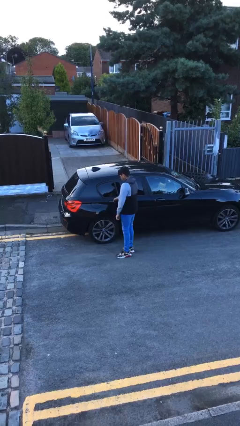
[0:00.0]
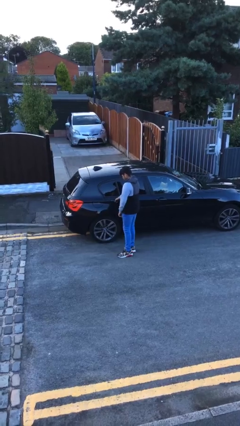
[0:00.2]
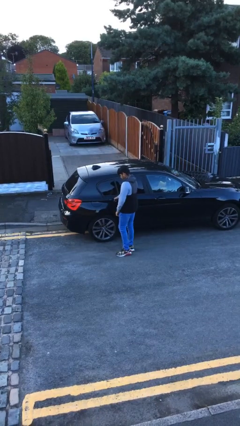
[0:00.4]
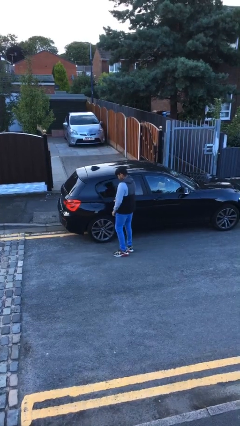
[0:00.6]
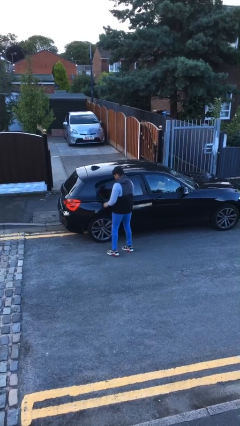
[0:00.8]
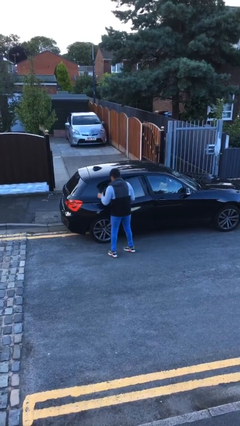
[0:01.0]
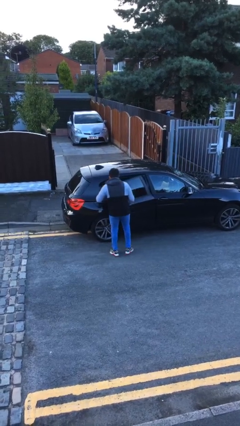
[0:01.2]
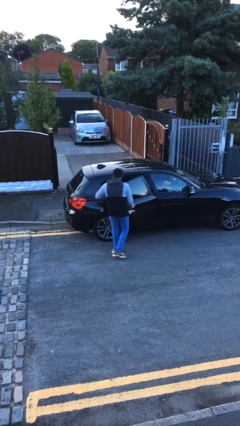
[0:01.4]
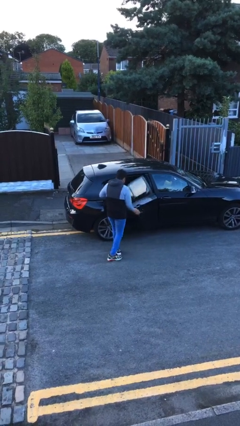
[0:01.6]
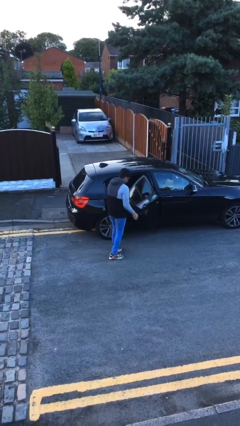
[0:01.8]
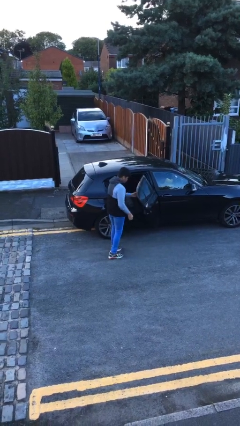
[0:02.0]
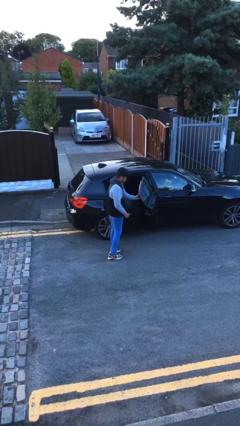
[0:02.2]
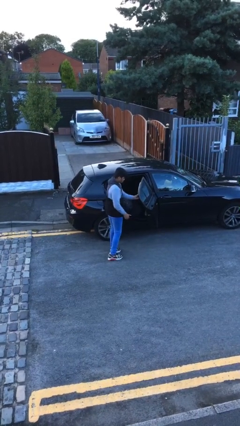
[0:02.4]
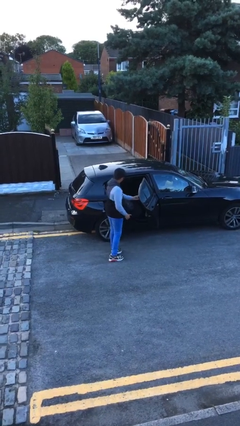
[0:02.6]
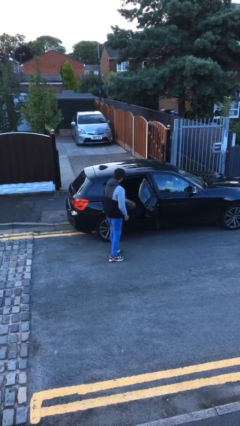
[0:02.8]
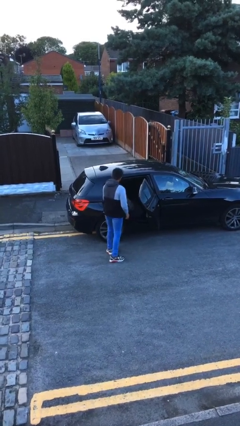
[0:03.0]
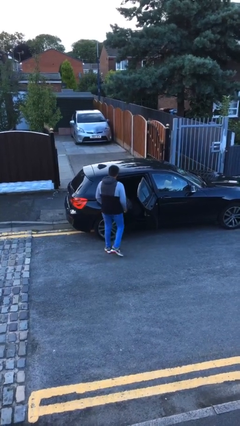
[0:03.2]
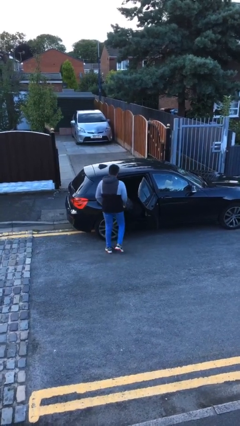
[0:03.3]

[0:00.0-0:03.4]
person opens car door

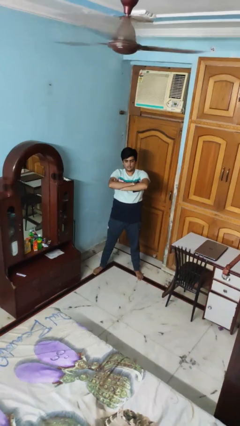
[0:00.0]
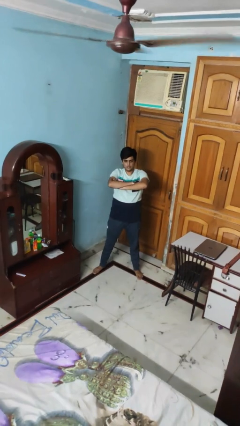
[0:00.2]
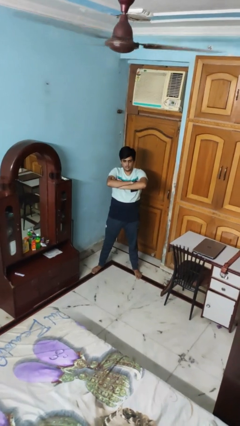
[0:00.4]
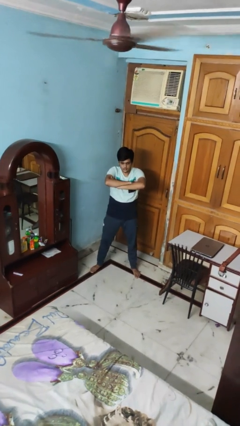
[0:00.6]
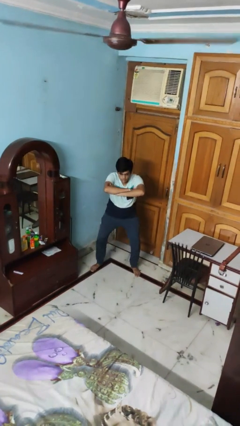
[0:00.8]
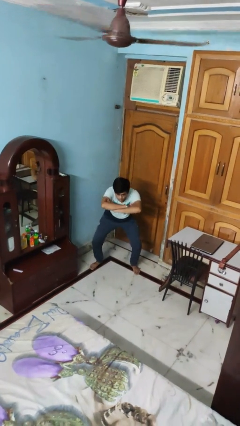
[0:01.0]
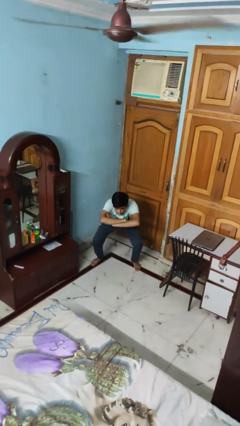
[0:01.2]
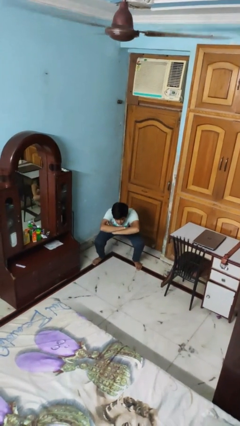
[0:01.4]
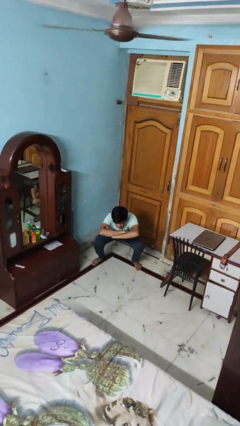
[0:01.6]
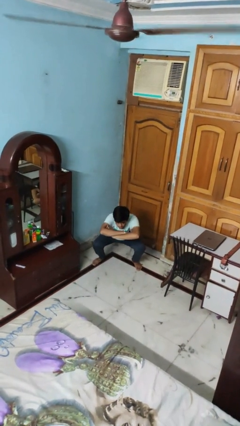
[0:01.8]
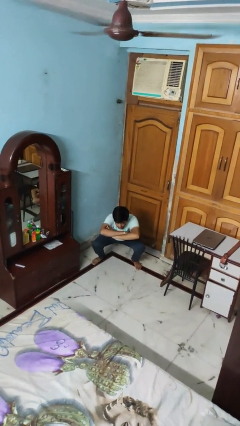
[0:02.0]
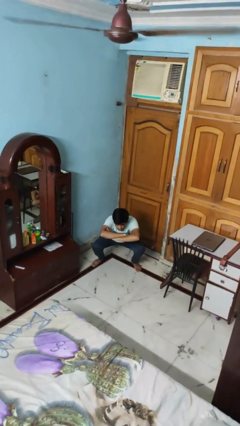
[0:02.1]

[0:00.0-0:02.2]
person squats

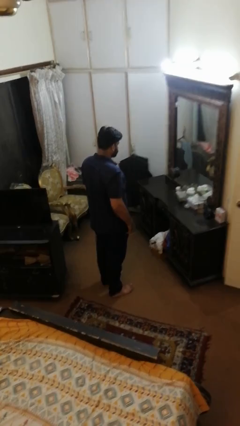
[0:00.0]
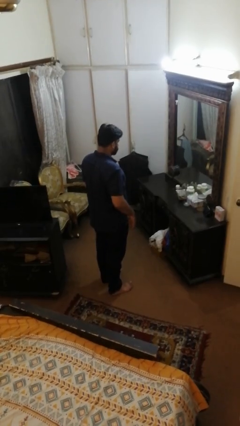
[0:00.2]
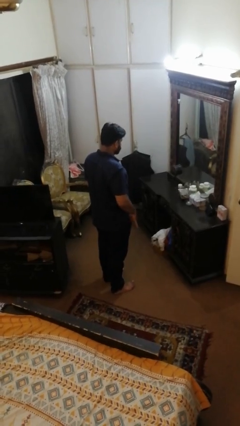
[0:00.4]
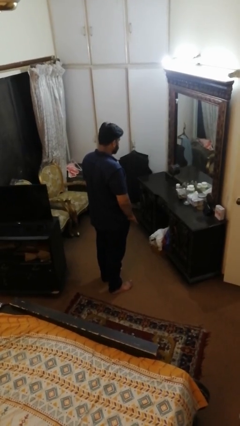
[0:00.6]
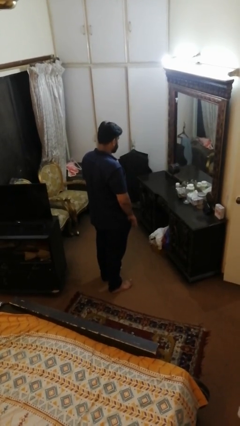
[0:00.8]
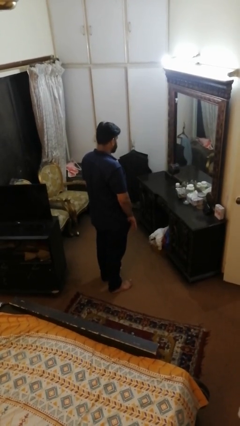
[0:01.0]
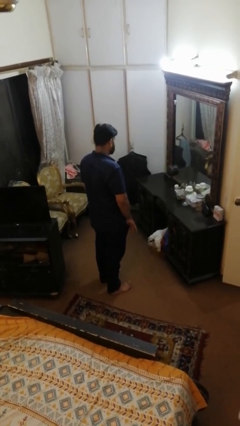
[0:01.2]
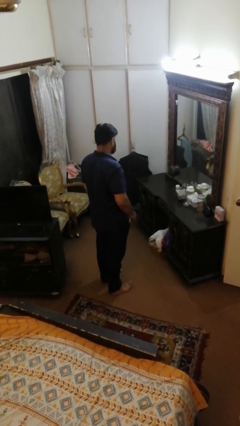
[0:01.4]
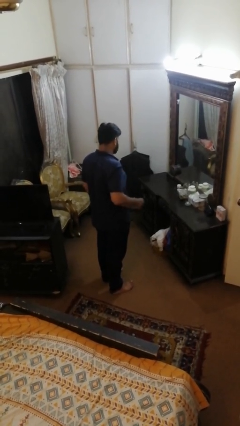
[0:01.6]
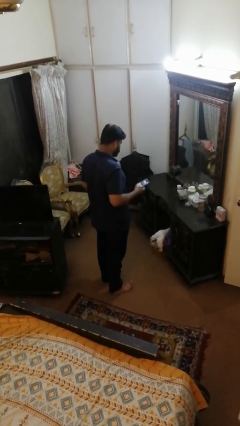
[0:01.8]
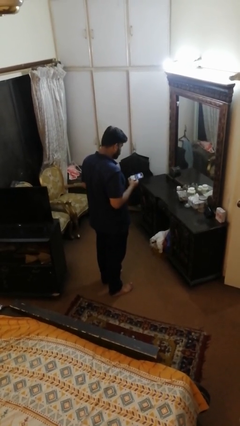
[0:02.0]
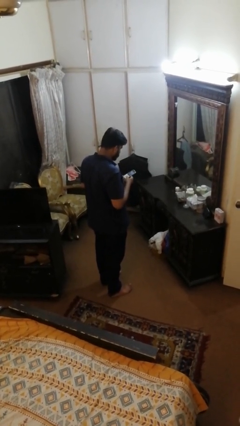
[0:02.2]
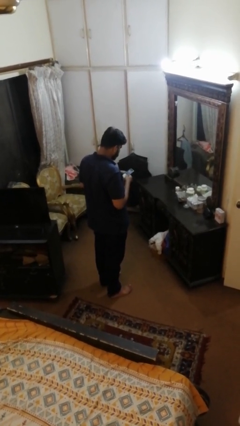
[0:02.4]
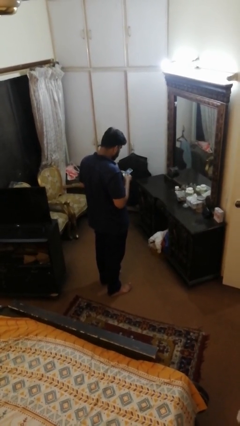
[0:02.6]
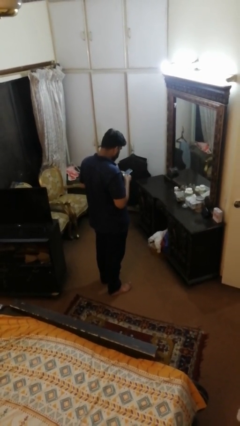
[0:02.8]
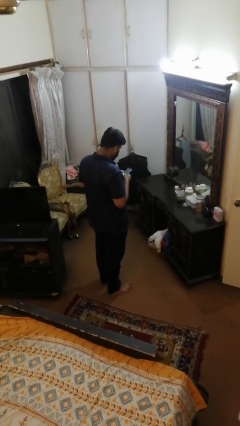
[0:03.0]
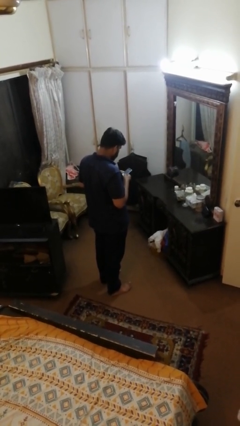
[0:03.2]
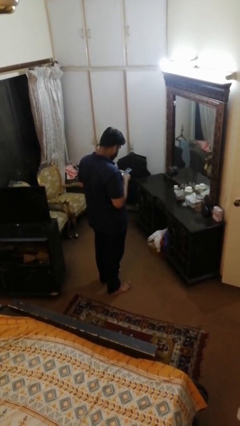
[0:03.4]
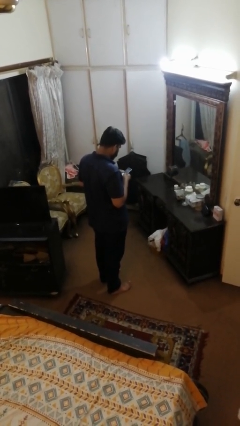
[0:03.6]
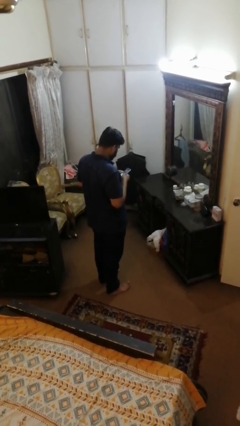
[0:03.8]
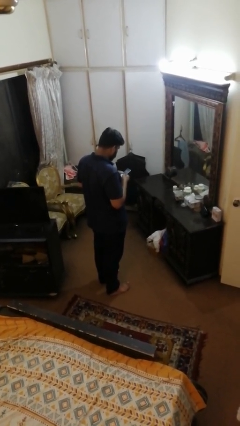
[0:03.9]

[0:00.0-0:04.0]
person takes phone from pocket

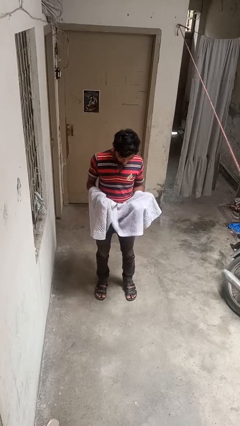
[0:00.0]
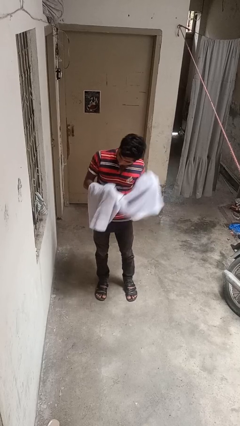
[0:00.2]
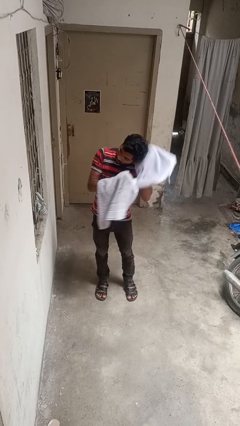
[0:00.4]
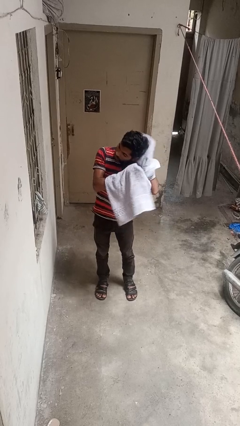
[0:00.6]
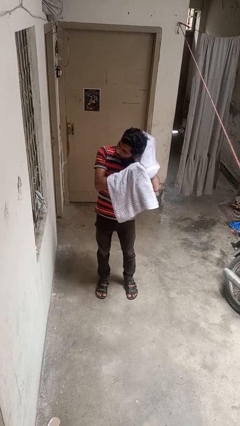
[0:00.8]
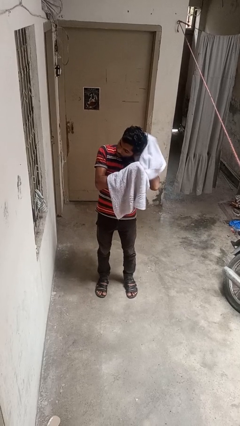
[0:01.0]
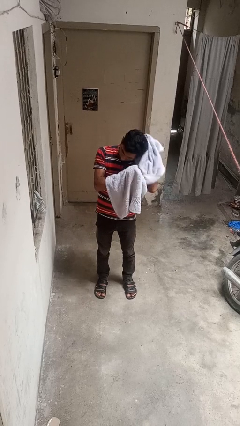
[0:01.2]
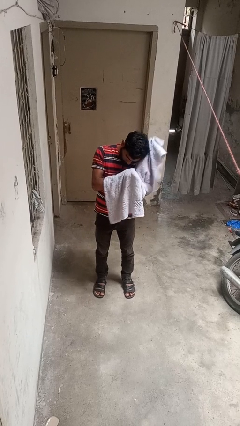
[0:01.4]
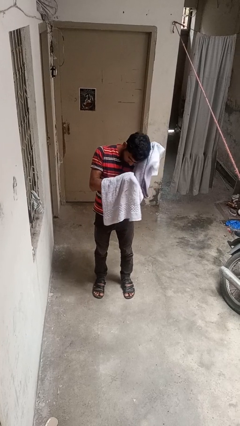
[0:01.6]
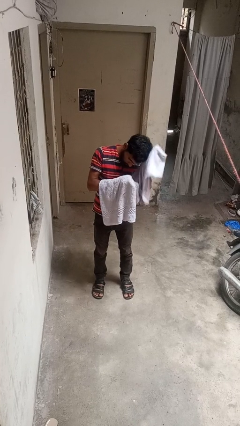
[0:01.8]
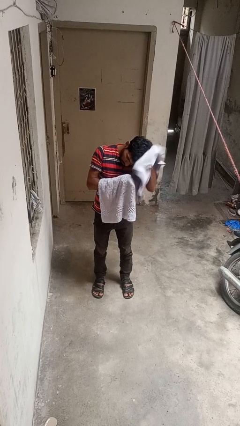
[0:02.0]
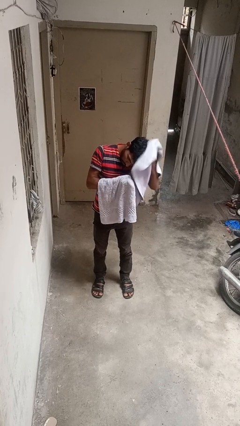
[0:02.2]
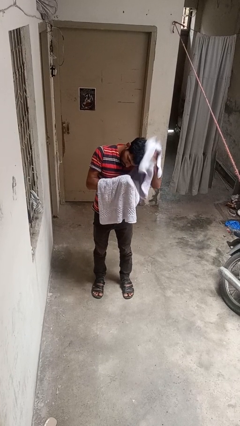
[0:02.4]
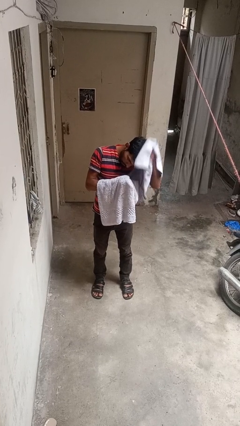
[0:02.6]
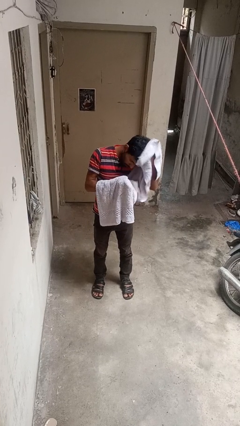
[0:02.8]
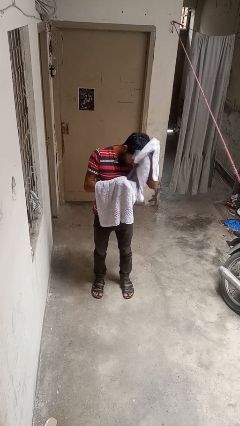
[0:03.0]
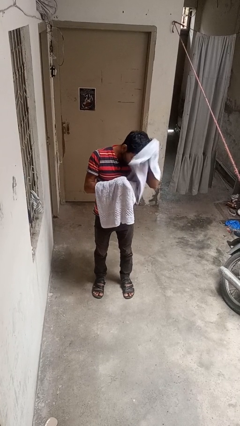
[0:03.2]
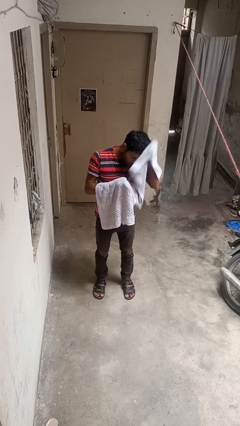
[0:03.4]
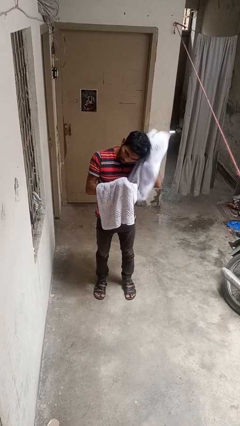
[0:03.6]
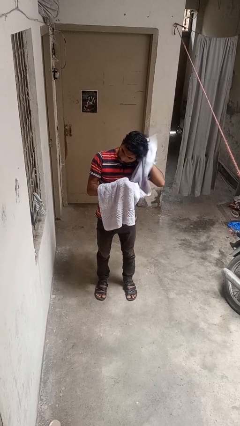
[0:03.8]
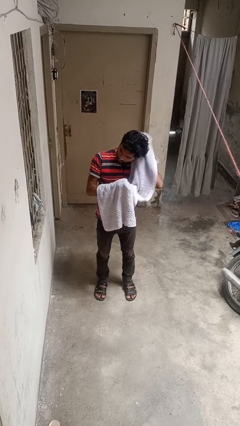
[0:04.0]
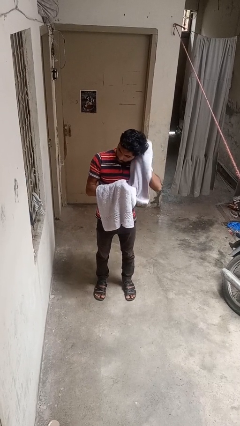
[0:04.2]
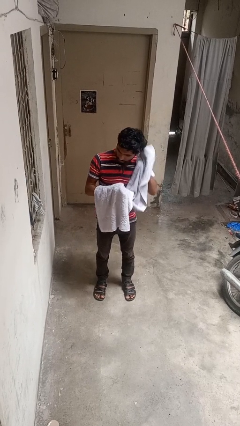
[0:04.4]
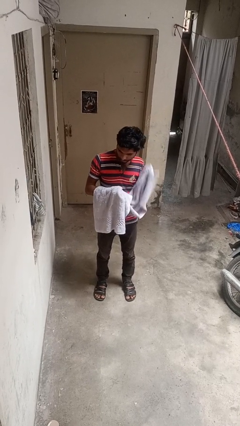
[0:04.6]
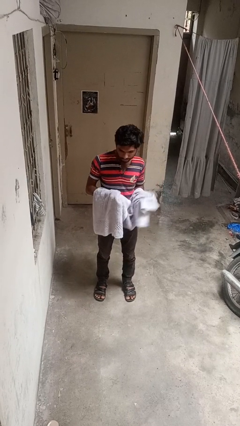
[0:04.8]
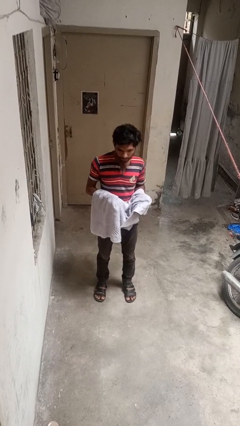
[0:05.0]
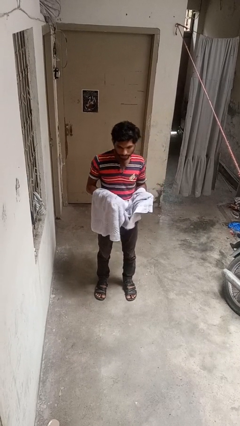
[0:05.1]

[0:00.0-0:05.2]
person dries hair with towel

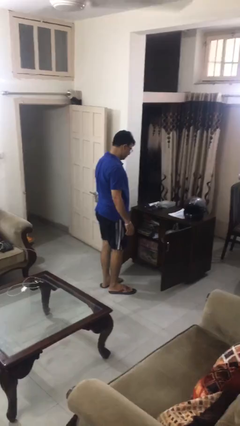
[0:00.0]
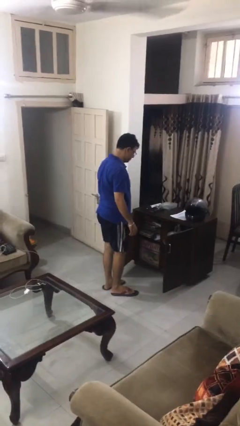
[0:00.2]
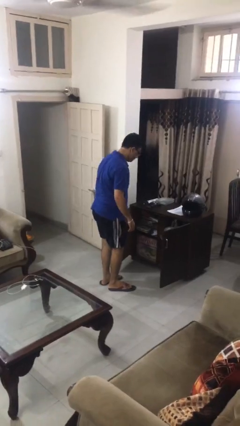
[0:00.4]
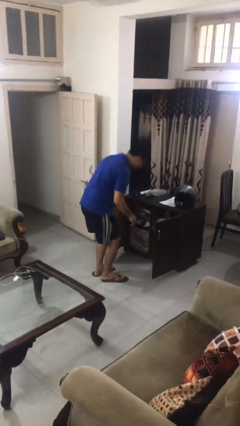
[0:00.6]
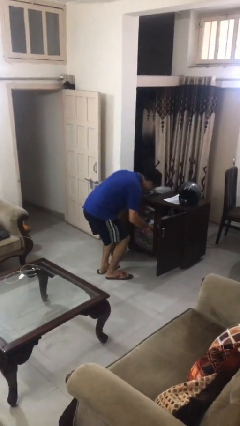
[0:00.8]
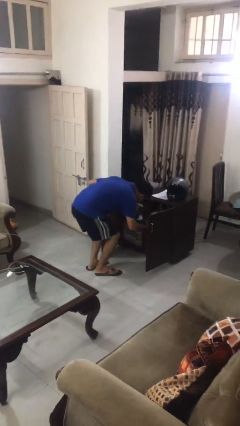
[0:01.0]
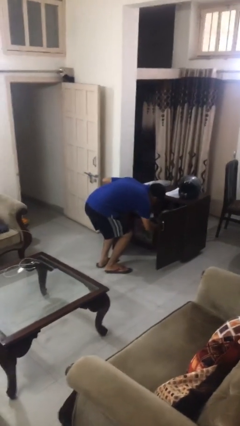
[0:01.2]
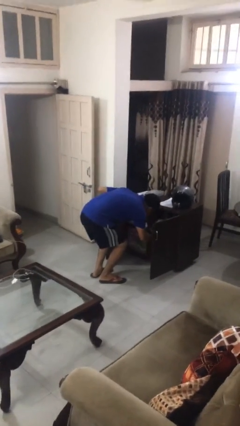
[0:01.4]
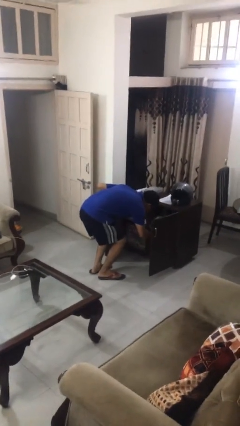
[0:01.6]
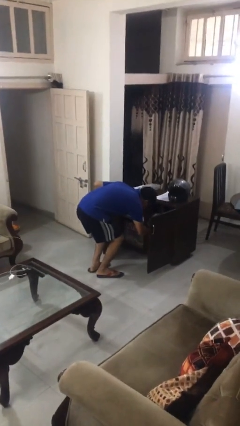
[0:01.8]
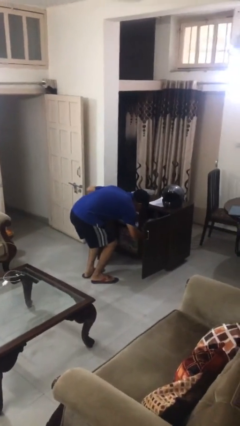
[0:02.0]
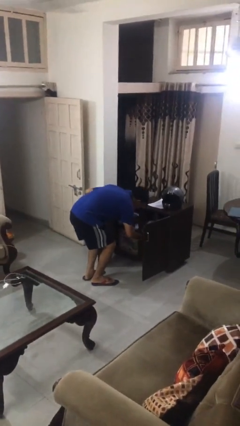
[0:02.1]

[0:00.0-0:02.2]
person searches in cabinet

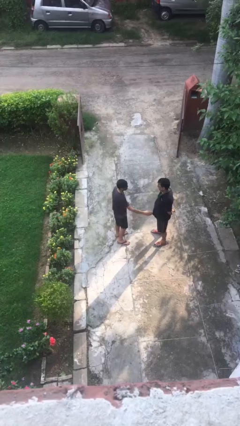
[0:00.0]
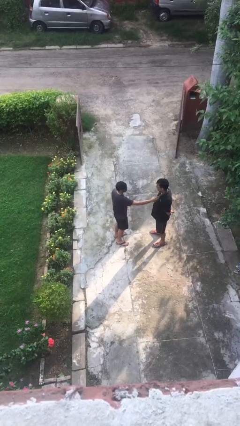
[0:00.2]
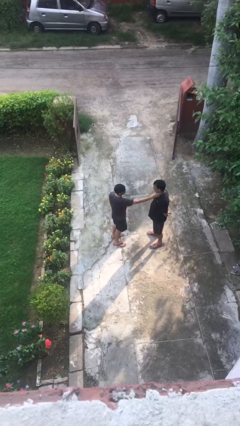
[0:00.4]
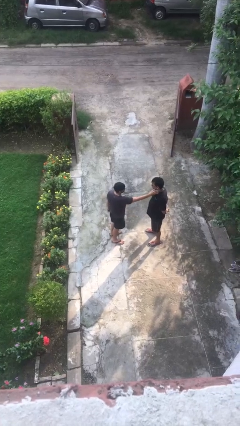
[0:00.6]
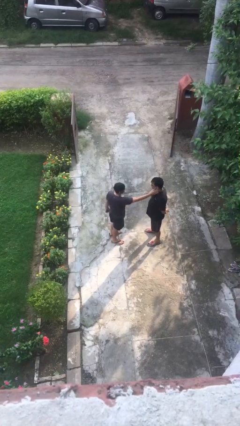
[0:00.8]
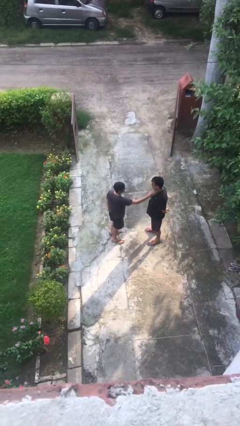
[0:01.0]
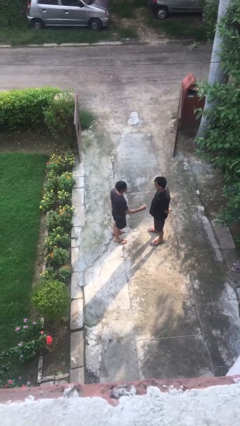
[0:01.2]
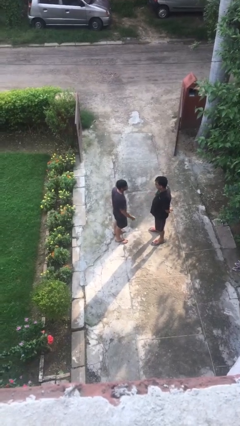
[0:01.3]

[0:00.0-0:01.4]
person touches face of person
